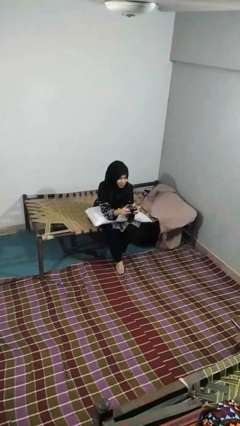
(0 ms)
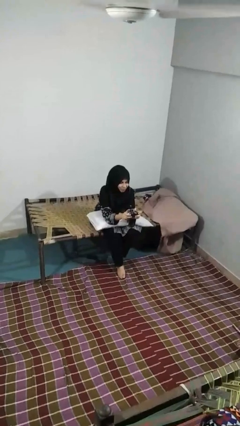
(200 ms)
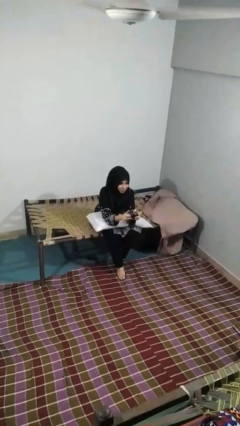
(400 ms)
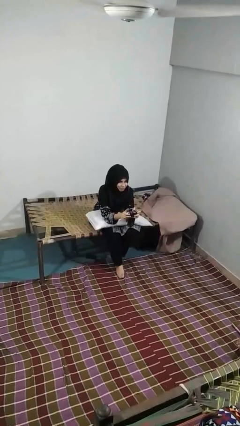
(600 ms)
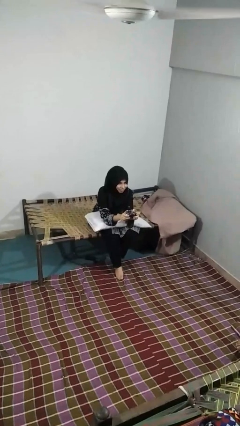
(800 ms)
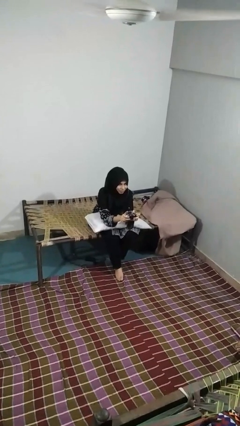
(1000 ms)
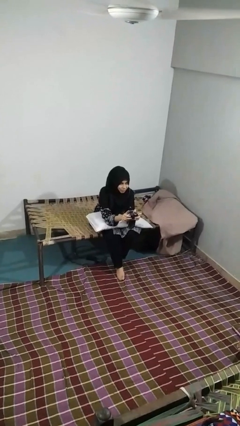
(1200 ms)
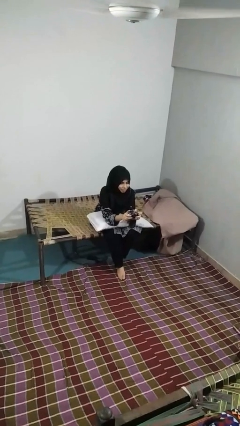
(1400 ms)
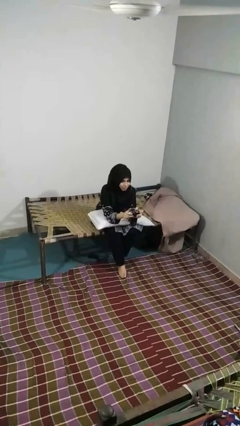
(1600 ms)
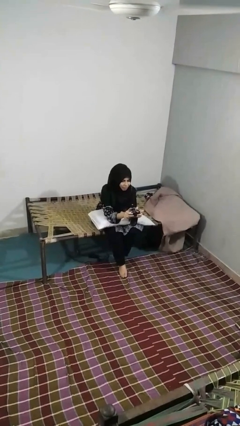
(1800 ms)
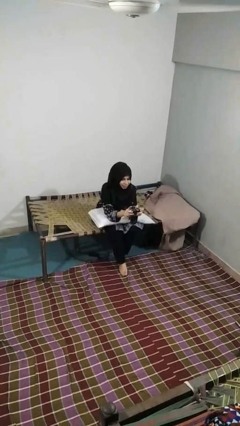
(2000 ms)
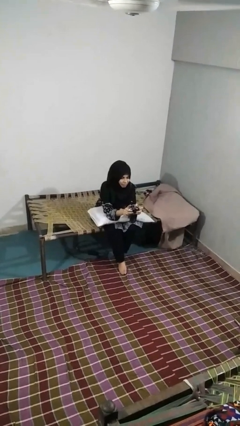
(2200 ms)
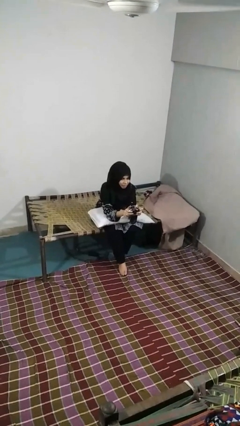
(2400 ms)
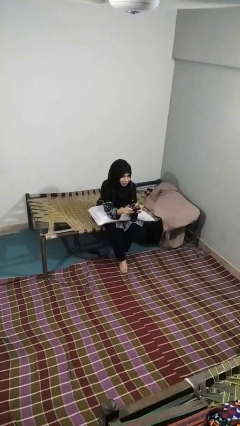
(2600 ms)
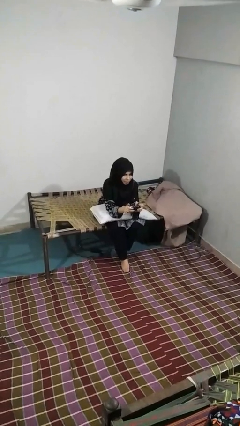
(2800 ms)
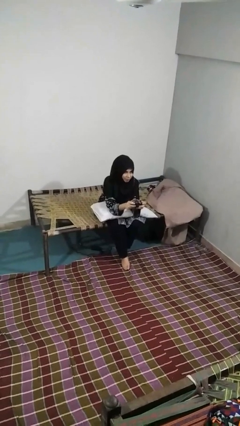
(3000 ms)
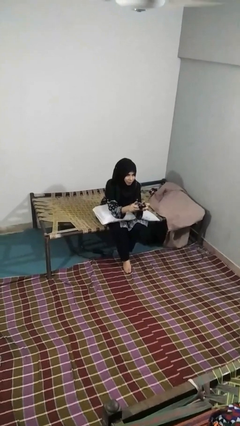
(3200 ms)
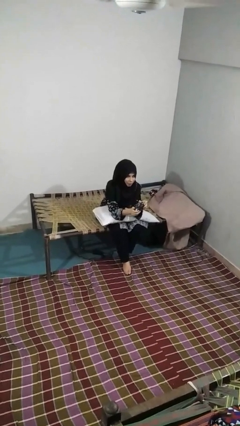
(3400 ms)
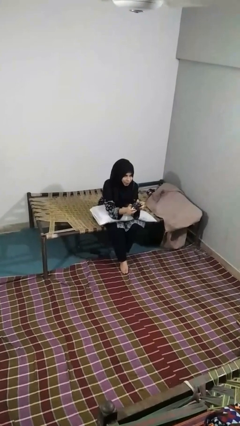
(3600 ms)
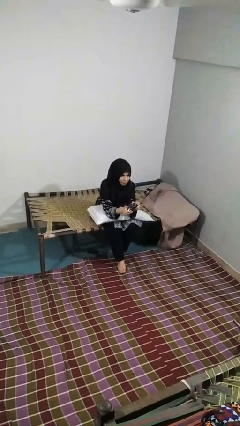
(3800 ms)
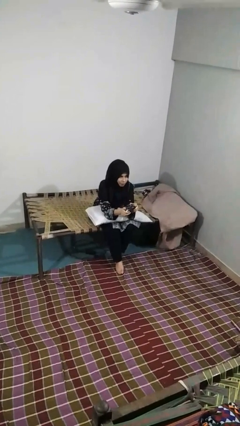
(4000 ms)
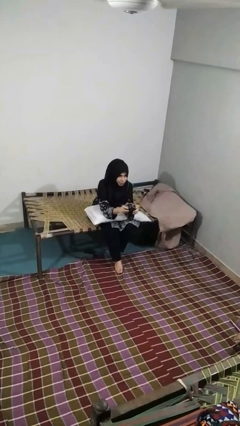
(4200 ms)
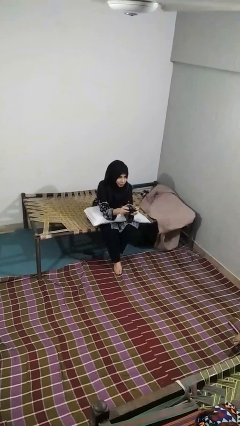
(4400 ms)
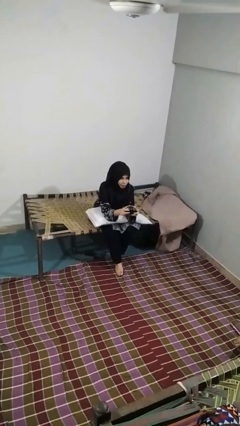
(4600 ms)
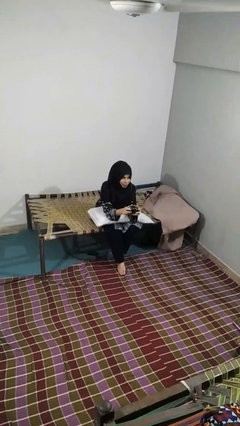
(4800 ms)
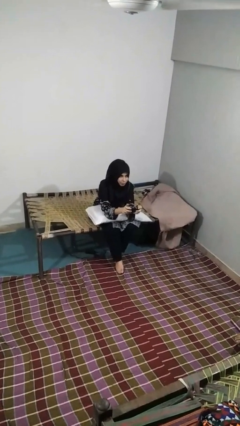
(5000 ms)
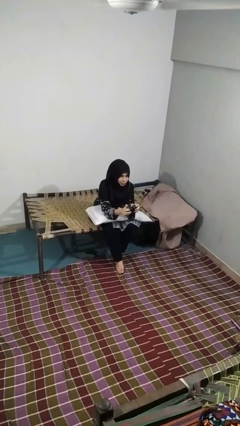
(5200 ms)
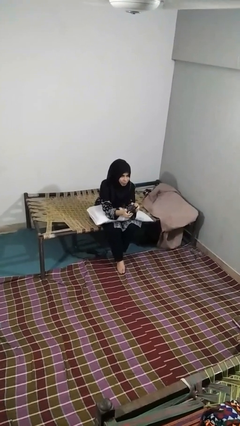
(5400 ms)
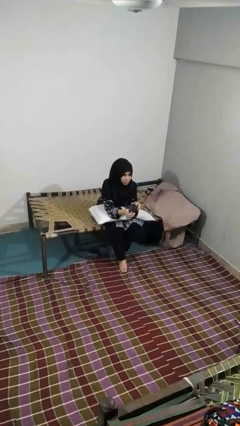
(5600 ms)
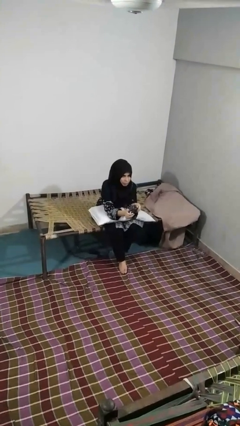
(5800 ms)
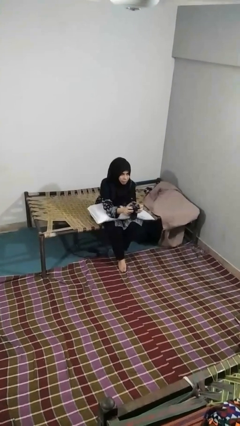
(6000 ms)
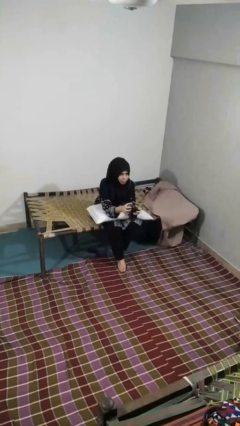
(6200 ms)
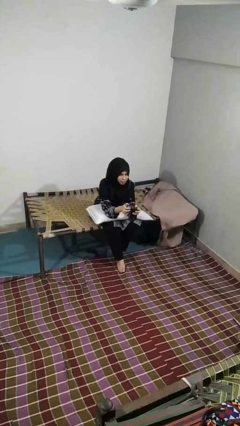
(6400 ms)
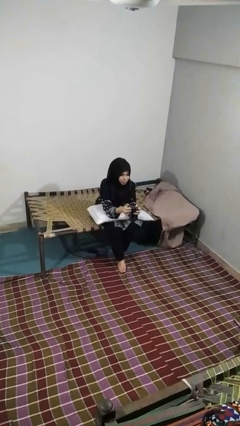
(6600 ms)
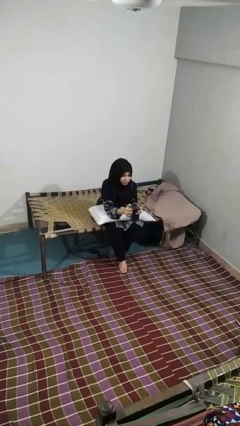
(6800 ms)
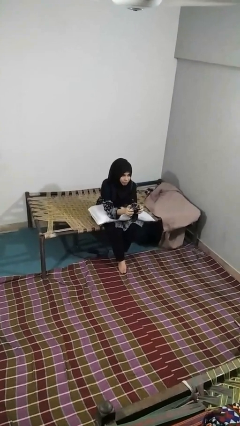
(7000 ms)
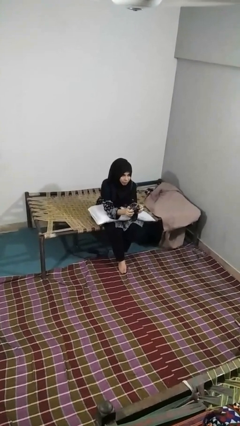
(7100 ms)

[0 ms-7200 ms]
person interacts with handheld game

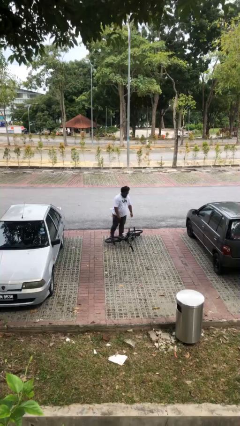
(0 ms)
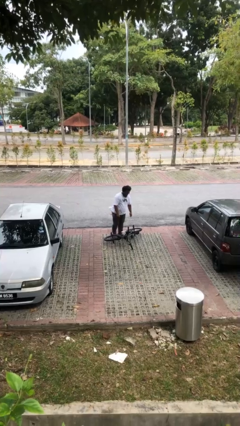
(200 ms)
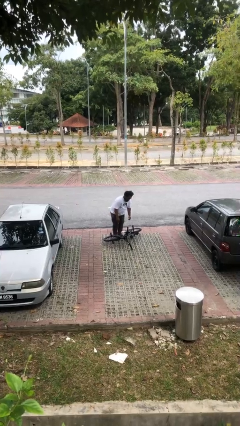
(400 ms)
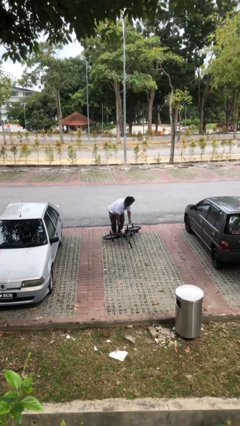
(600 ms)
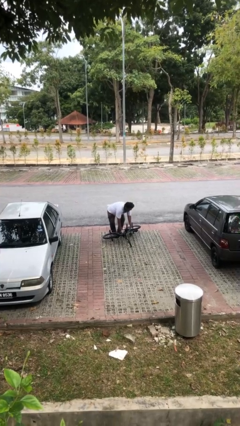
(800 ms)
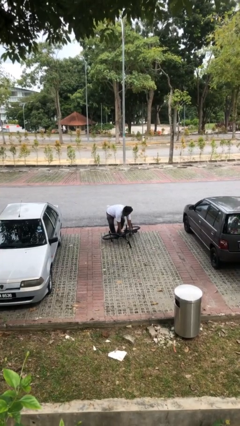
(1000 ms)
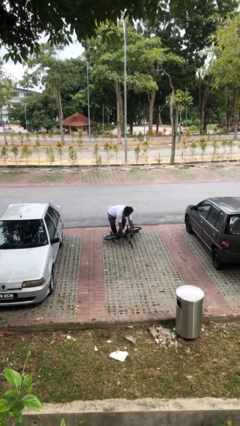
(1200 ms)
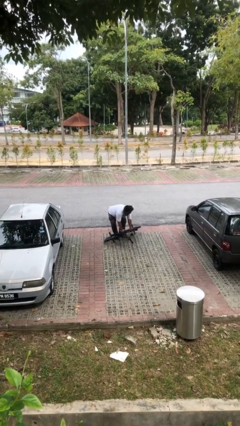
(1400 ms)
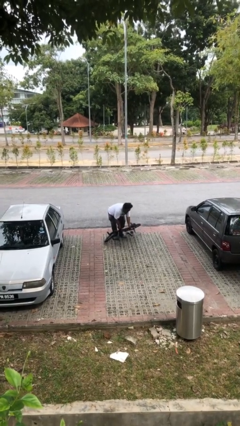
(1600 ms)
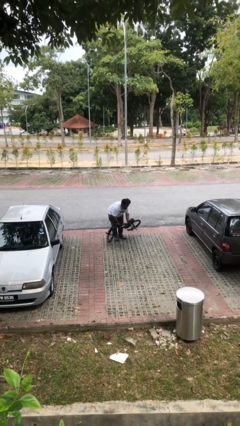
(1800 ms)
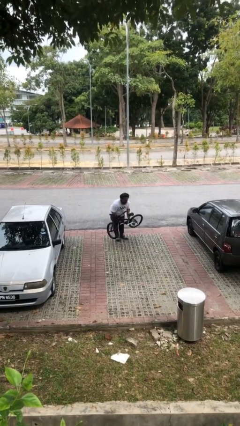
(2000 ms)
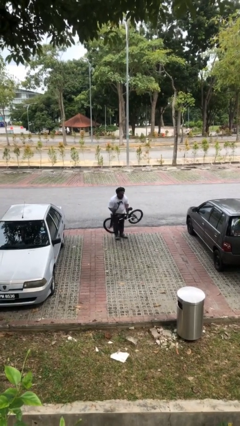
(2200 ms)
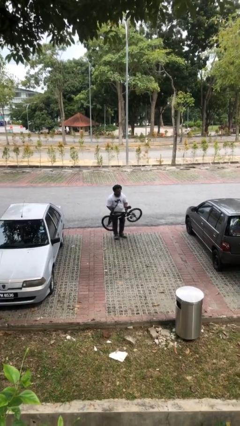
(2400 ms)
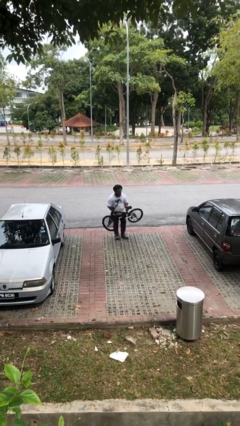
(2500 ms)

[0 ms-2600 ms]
person picks up object from floor

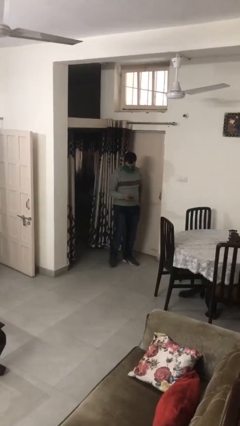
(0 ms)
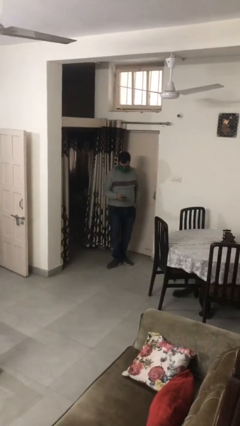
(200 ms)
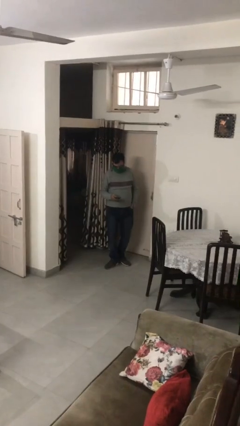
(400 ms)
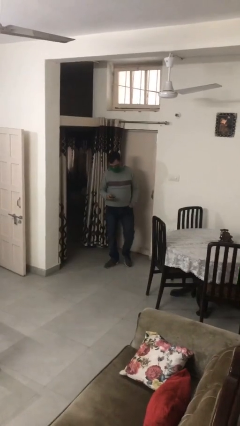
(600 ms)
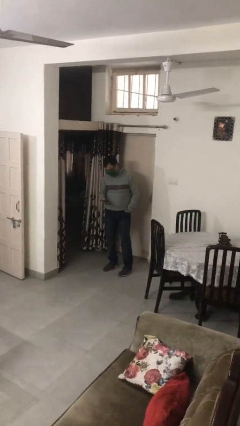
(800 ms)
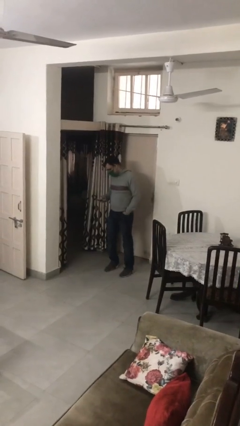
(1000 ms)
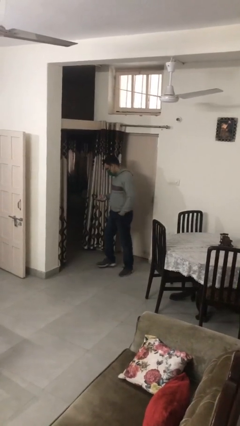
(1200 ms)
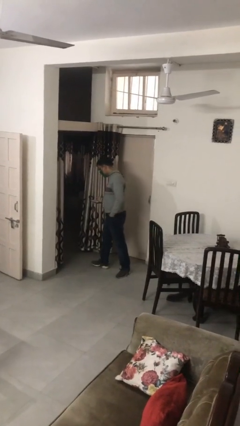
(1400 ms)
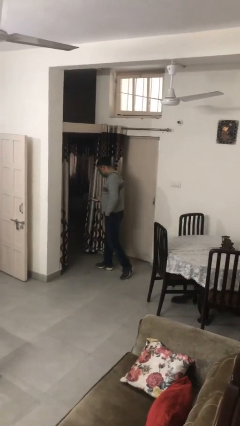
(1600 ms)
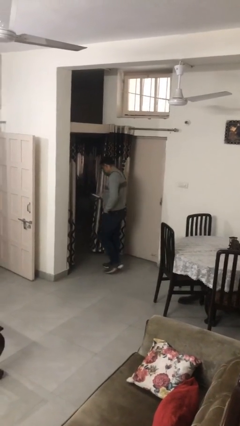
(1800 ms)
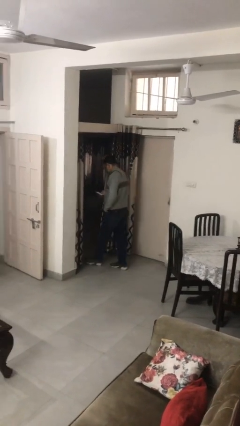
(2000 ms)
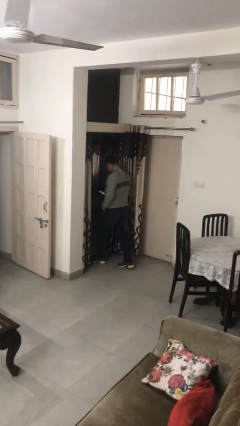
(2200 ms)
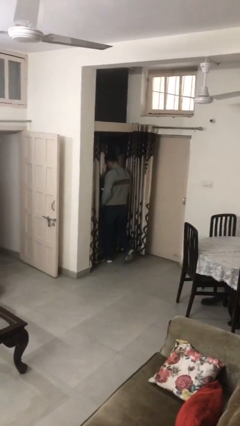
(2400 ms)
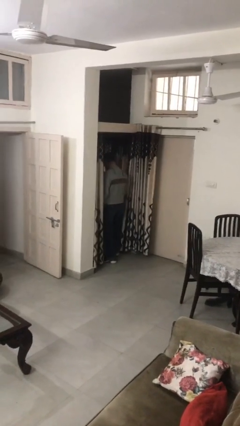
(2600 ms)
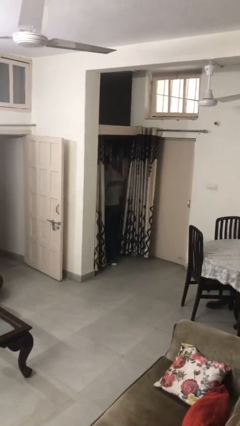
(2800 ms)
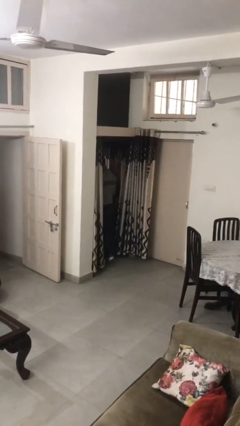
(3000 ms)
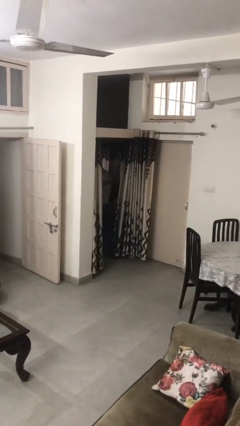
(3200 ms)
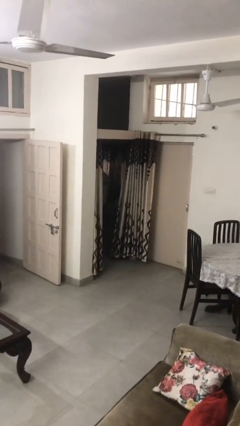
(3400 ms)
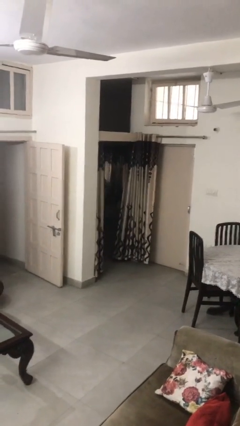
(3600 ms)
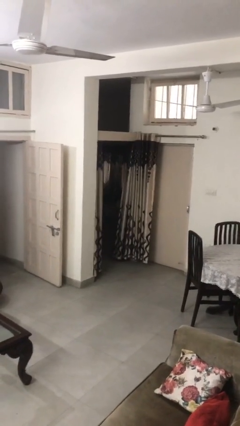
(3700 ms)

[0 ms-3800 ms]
person exits scene through structure

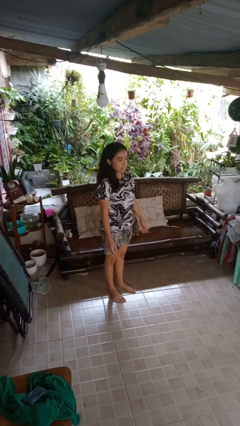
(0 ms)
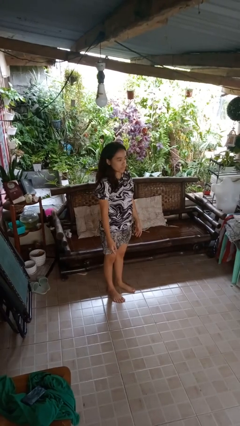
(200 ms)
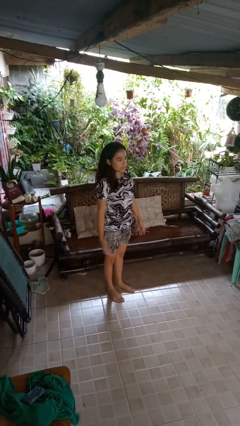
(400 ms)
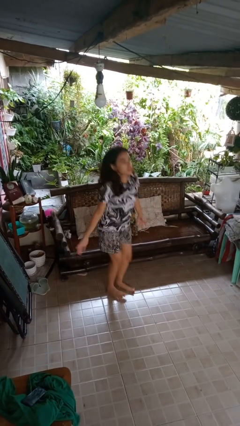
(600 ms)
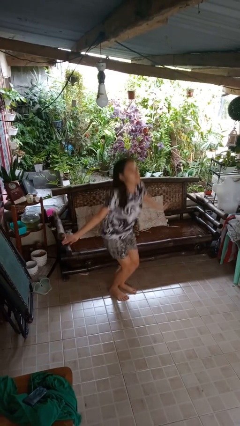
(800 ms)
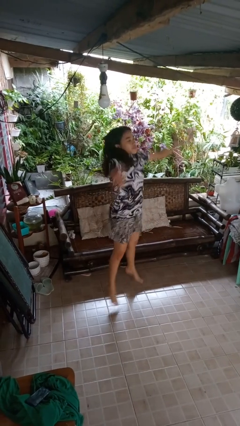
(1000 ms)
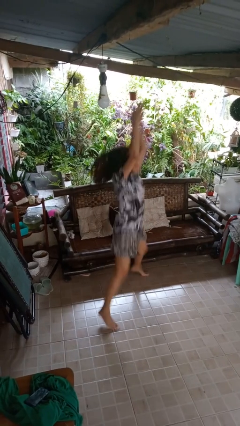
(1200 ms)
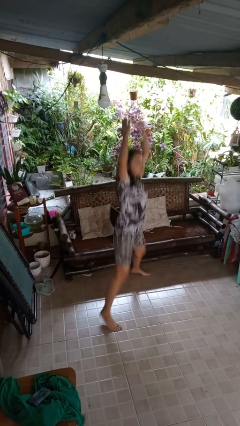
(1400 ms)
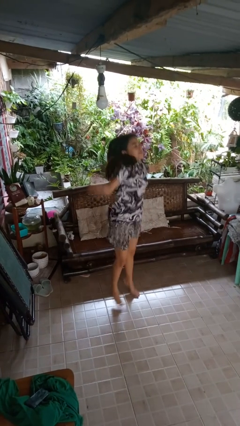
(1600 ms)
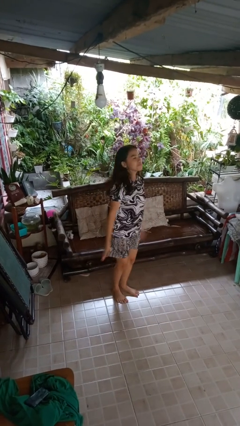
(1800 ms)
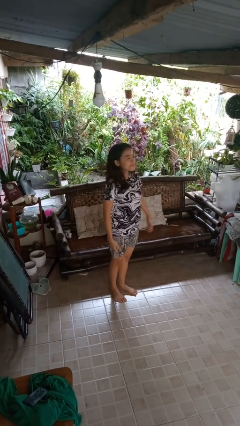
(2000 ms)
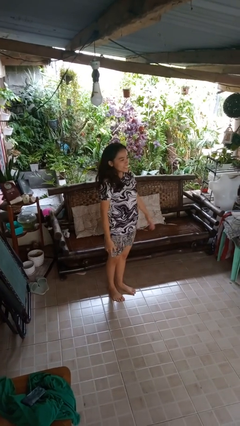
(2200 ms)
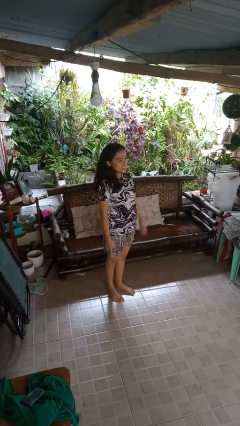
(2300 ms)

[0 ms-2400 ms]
person exercises with jumping jacks

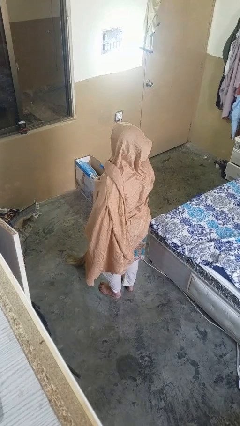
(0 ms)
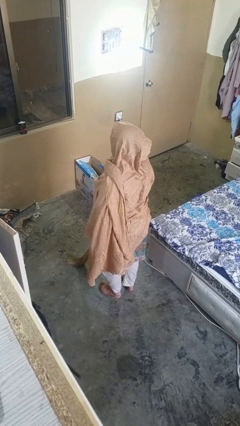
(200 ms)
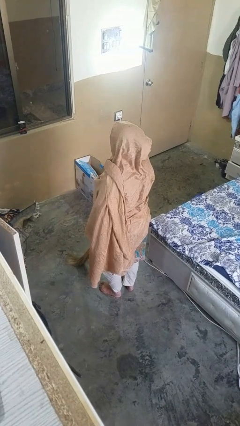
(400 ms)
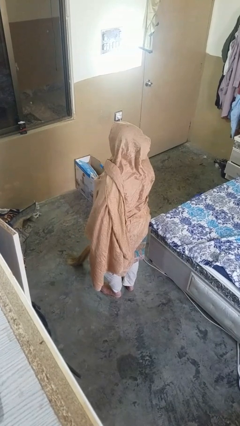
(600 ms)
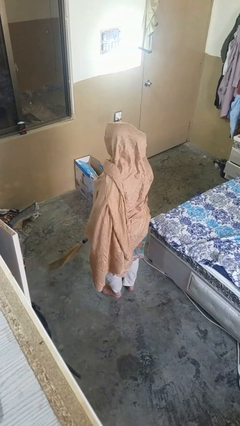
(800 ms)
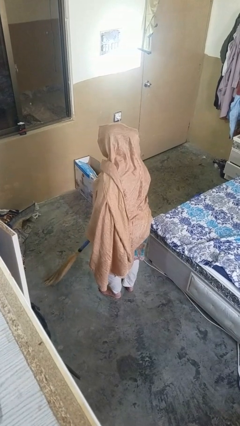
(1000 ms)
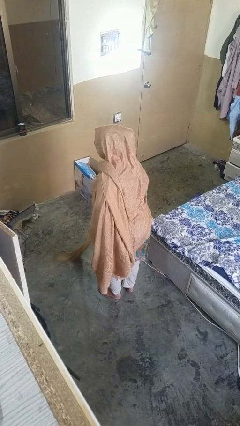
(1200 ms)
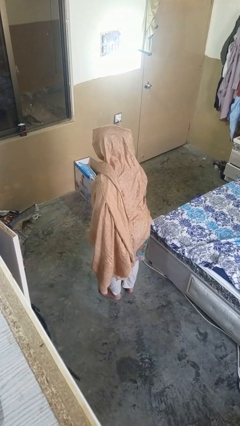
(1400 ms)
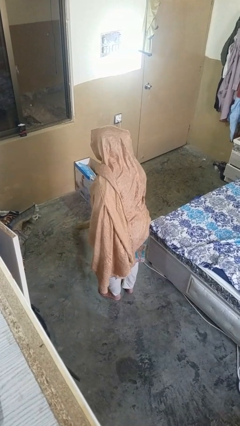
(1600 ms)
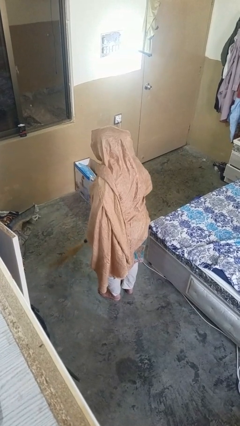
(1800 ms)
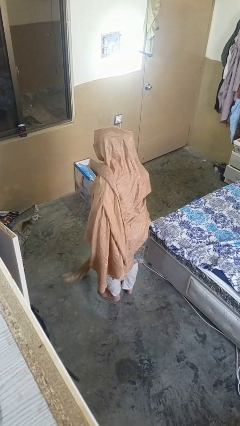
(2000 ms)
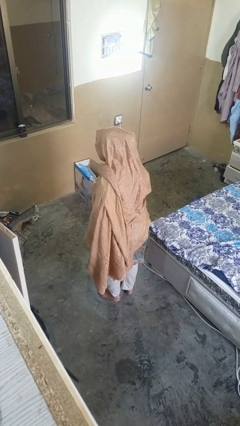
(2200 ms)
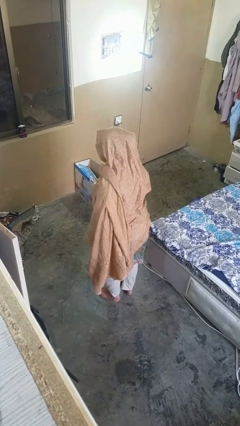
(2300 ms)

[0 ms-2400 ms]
person sweeps floor
